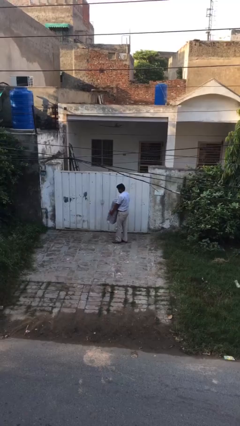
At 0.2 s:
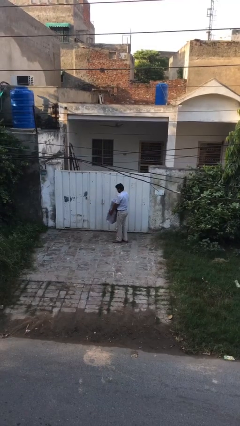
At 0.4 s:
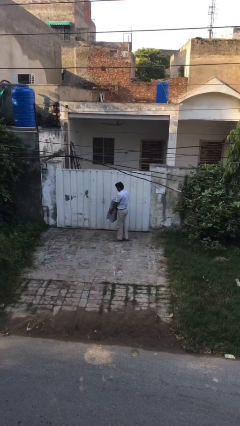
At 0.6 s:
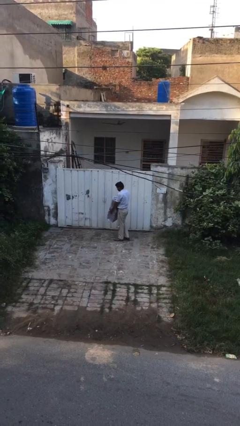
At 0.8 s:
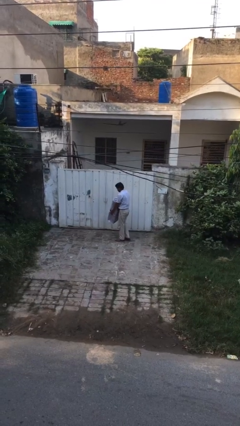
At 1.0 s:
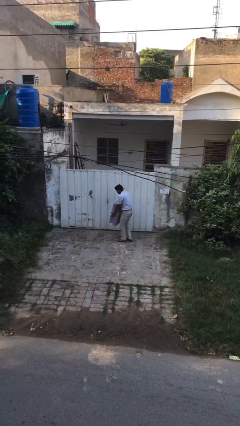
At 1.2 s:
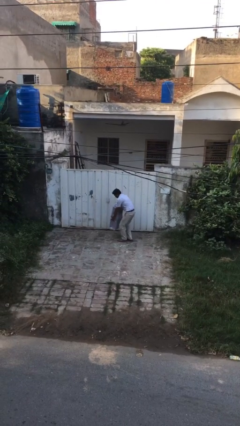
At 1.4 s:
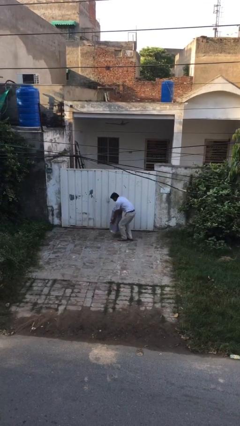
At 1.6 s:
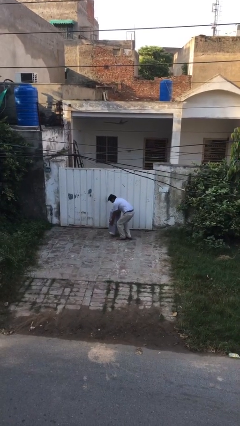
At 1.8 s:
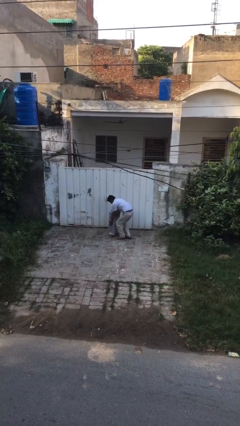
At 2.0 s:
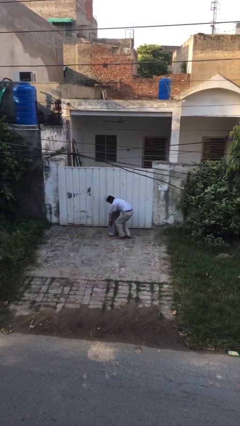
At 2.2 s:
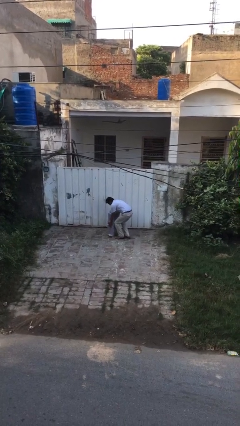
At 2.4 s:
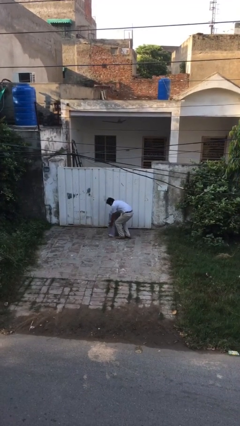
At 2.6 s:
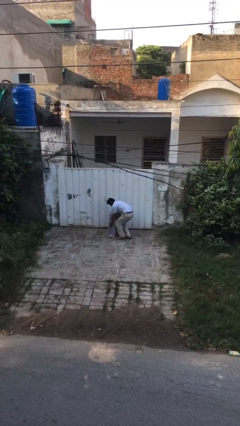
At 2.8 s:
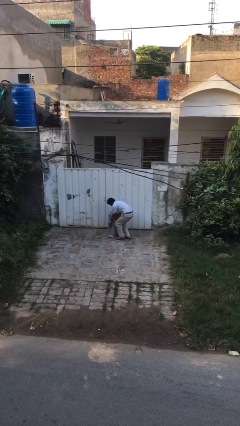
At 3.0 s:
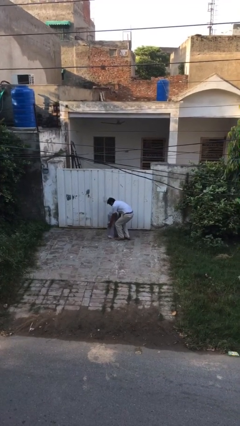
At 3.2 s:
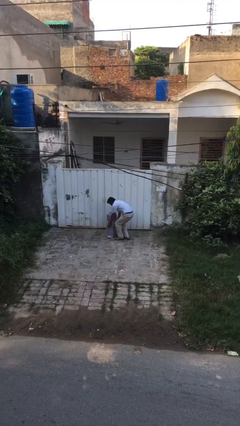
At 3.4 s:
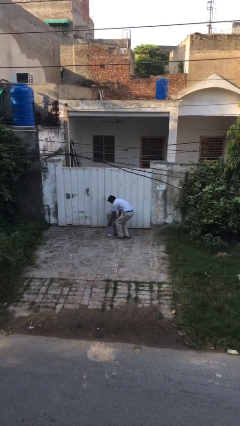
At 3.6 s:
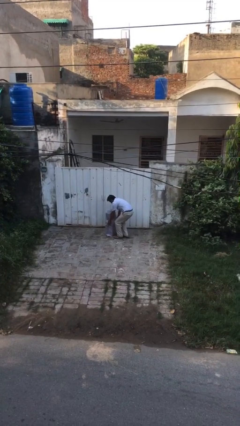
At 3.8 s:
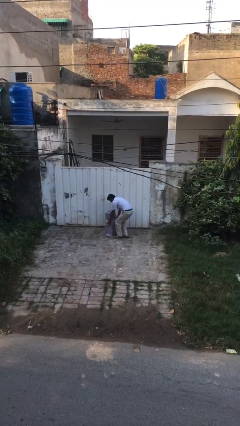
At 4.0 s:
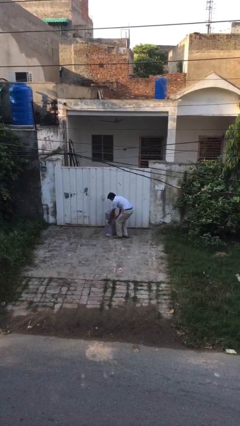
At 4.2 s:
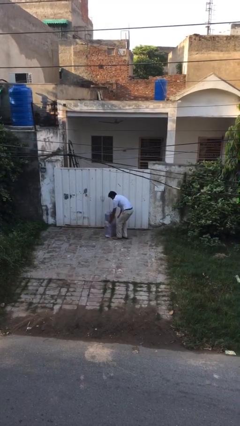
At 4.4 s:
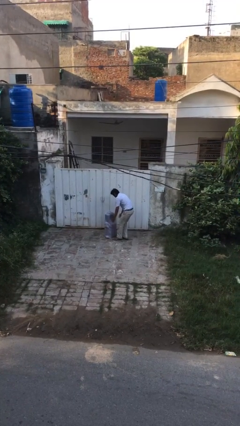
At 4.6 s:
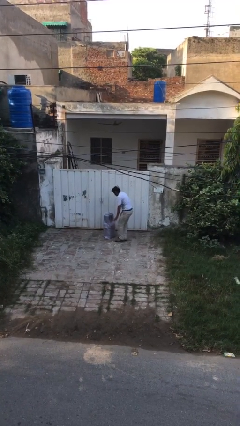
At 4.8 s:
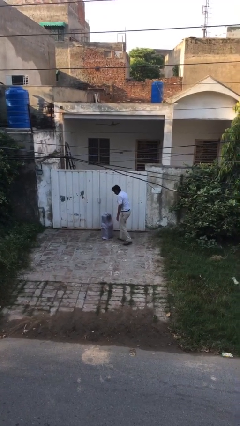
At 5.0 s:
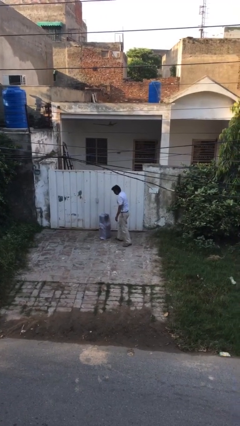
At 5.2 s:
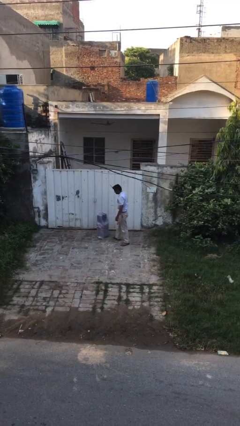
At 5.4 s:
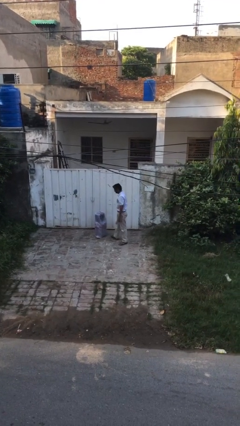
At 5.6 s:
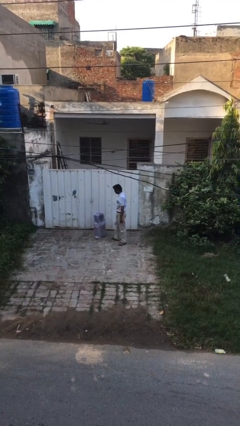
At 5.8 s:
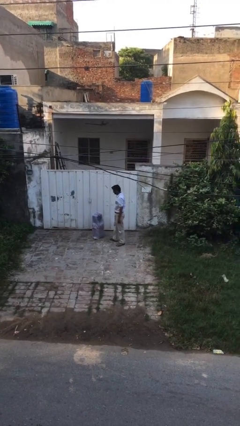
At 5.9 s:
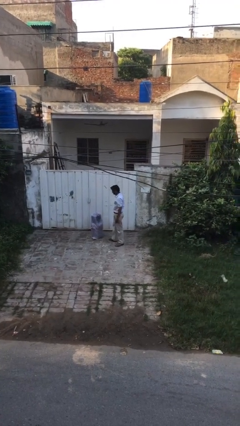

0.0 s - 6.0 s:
person puts down object on floor

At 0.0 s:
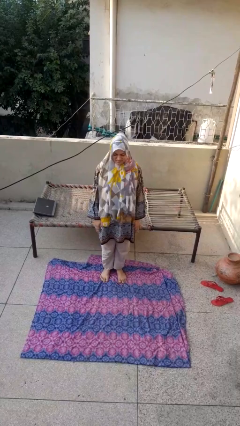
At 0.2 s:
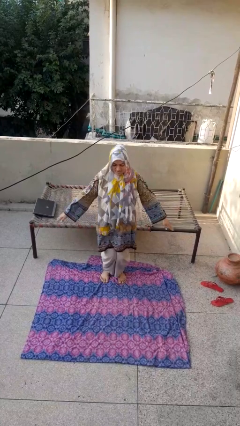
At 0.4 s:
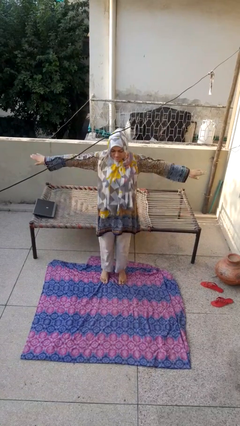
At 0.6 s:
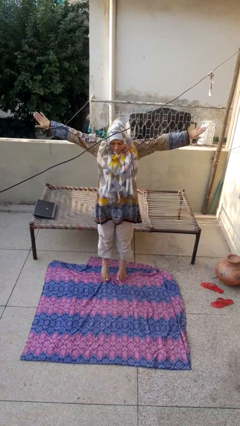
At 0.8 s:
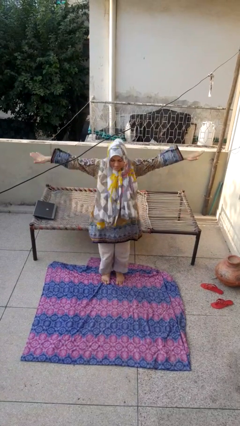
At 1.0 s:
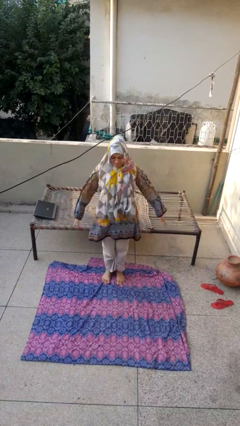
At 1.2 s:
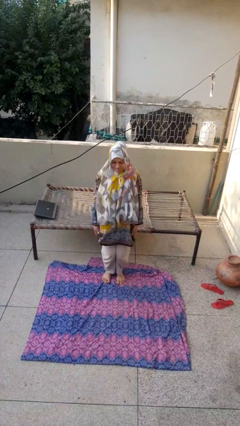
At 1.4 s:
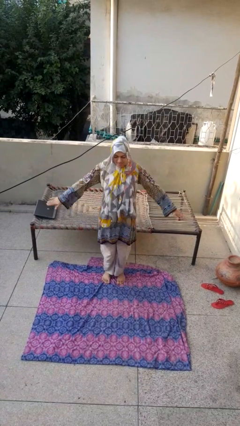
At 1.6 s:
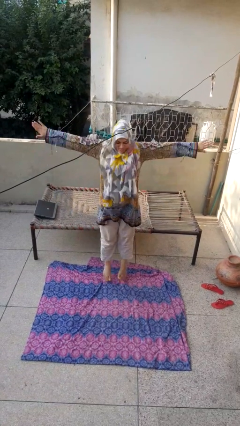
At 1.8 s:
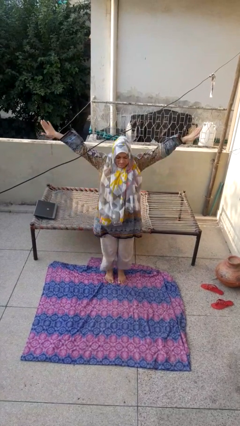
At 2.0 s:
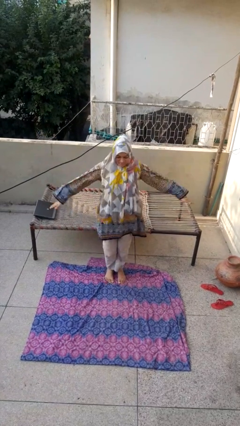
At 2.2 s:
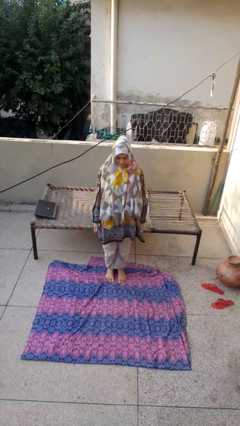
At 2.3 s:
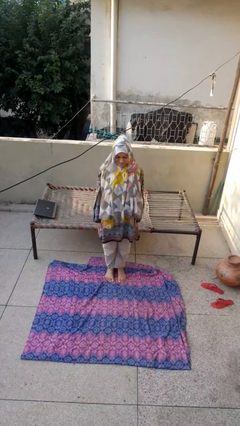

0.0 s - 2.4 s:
person exercises with jumping jacks

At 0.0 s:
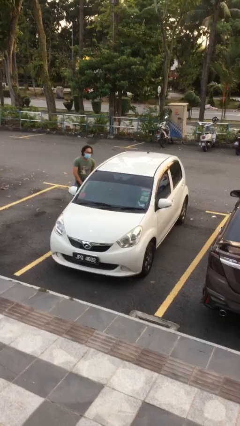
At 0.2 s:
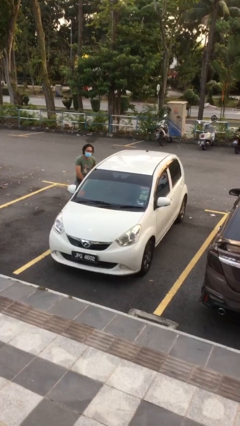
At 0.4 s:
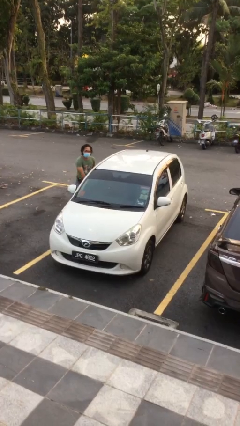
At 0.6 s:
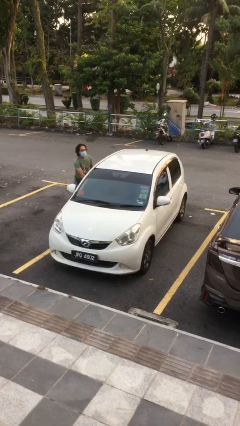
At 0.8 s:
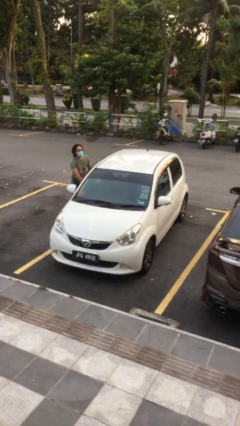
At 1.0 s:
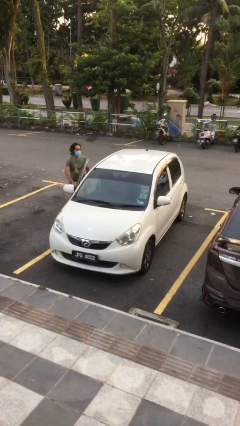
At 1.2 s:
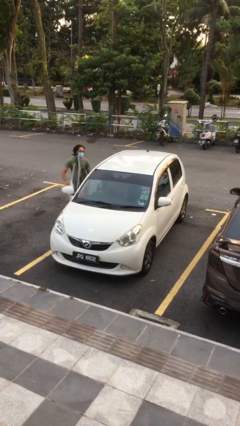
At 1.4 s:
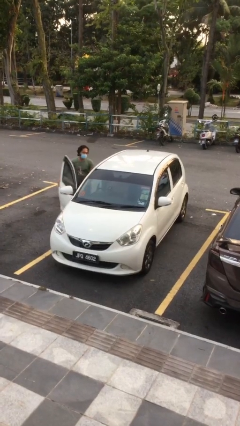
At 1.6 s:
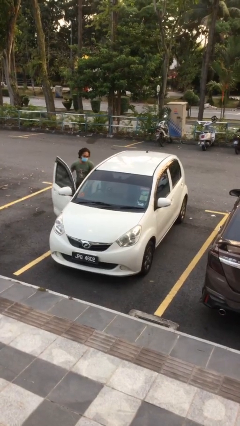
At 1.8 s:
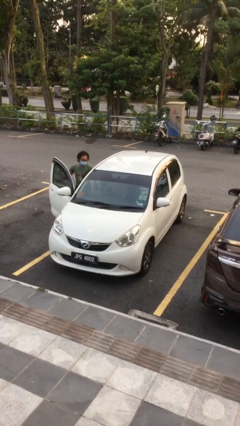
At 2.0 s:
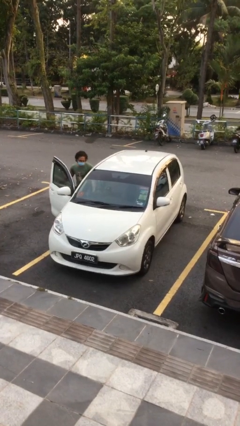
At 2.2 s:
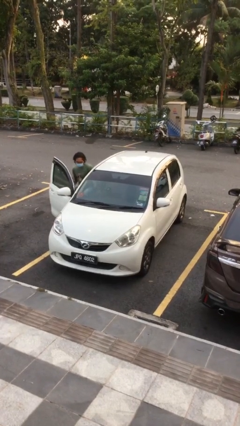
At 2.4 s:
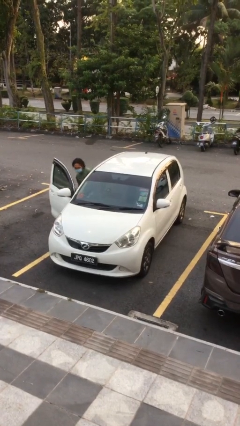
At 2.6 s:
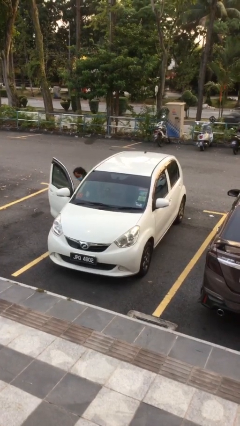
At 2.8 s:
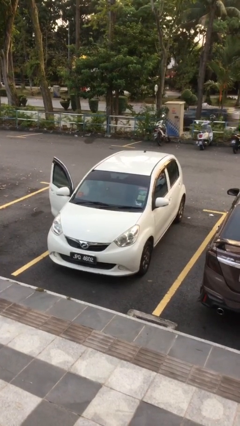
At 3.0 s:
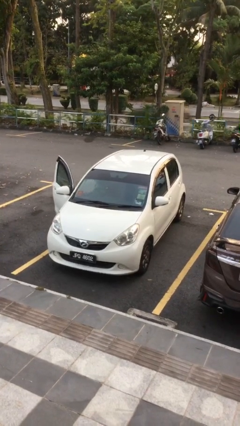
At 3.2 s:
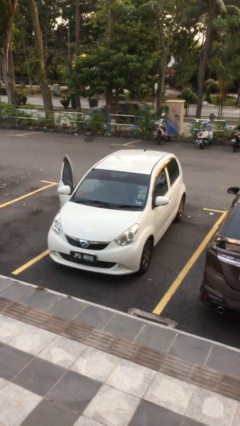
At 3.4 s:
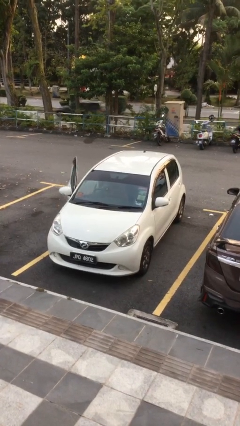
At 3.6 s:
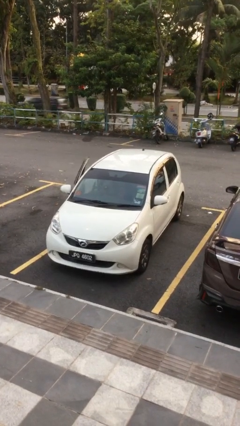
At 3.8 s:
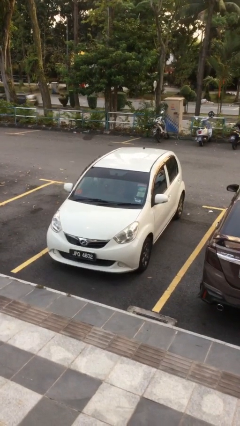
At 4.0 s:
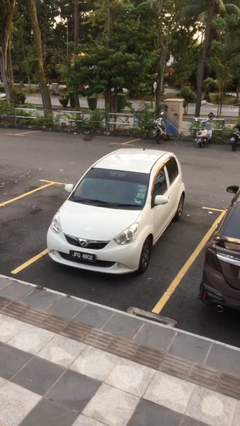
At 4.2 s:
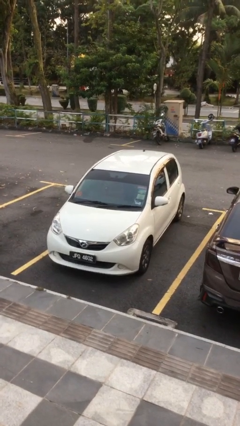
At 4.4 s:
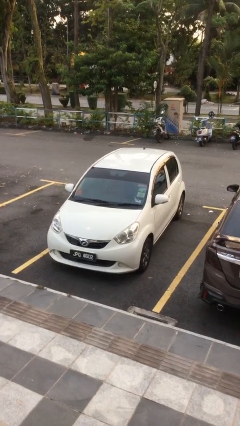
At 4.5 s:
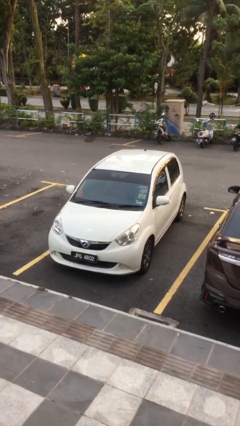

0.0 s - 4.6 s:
car picks up person

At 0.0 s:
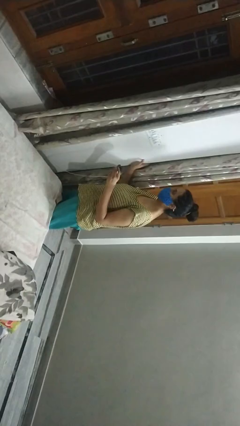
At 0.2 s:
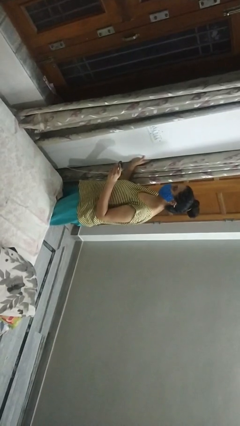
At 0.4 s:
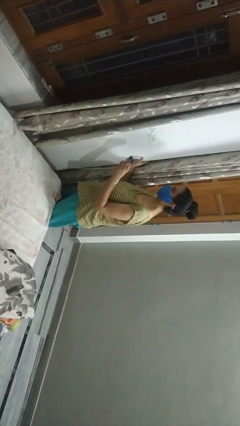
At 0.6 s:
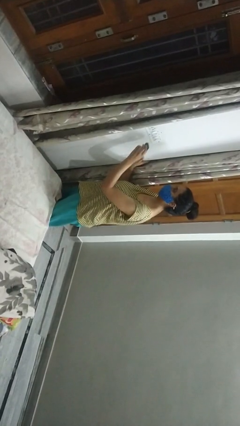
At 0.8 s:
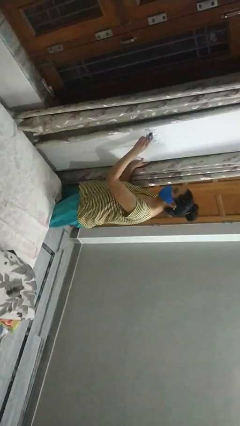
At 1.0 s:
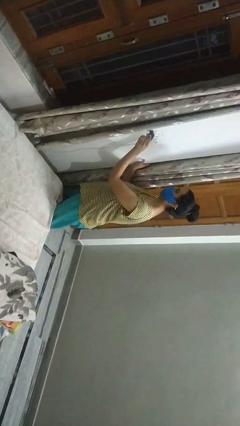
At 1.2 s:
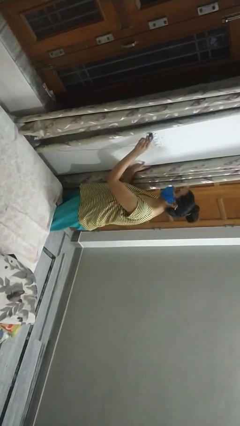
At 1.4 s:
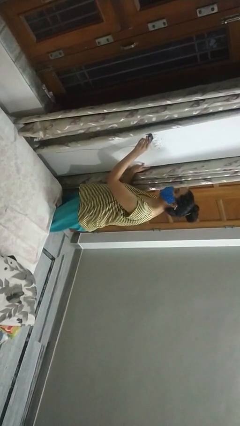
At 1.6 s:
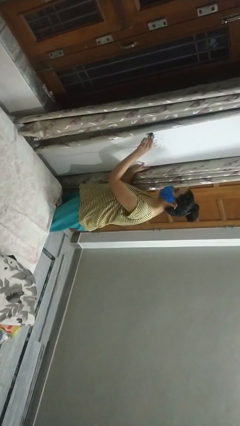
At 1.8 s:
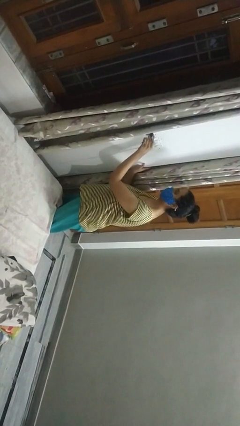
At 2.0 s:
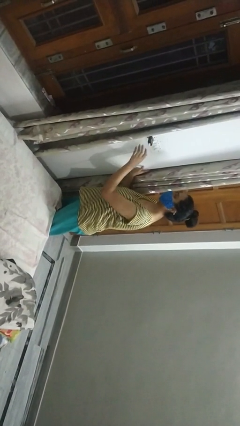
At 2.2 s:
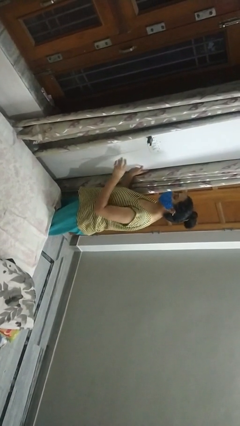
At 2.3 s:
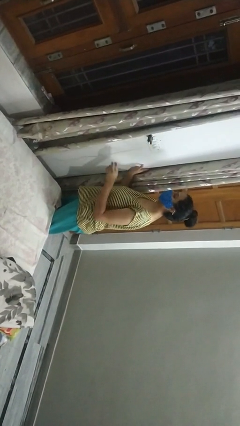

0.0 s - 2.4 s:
person plugs into electrical socket

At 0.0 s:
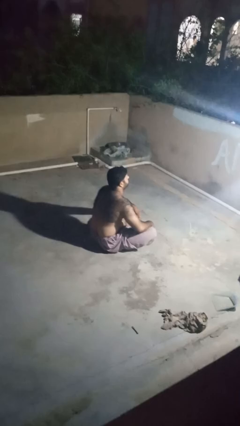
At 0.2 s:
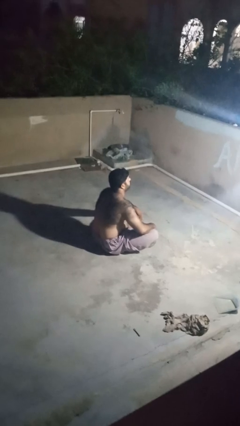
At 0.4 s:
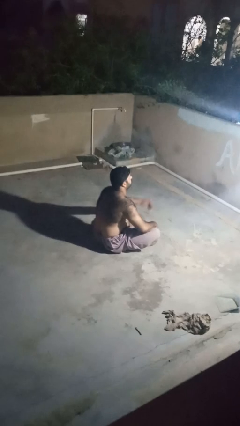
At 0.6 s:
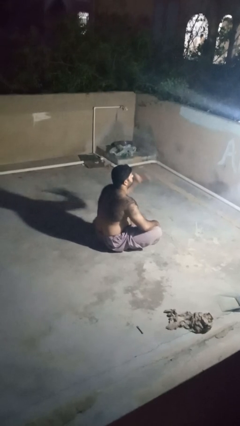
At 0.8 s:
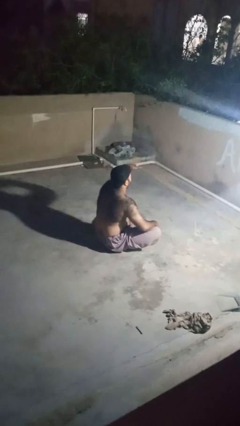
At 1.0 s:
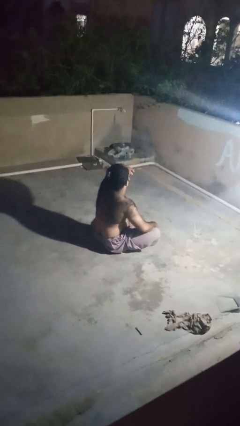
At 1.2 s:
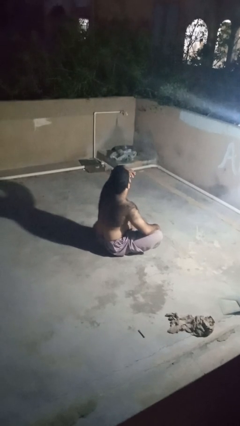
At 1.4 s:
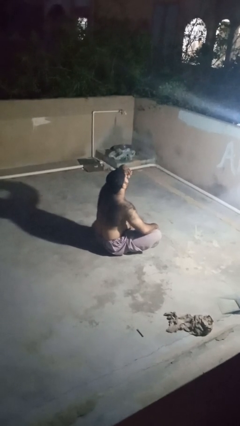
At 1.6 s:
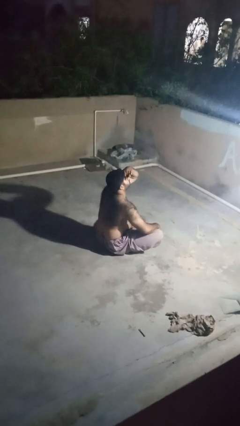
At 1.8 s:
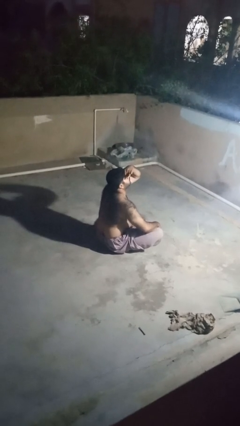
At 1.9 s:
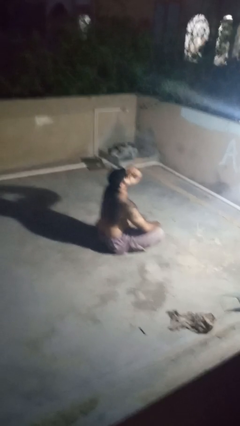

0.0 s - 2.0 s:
person shades eyes
